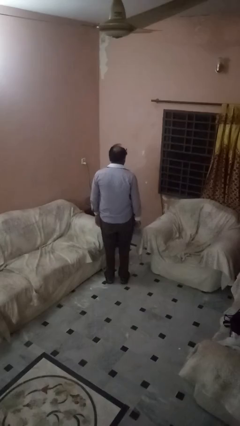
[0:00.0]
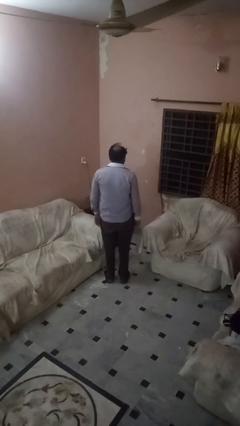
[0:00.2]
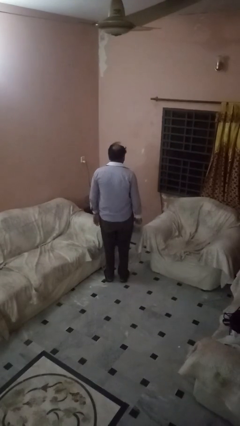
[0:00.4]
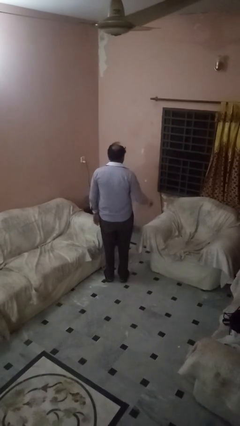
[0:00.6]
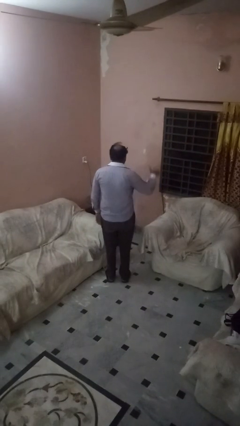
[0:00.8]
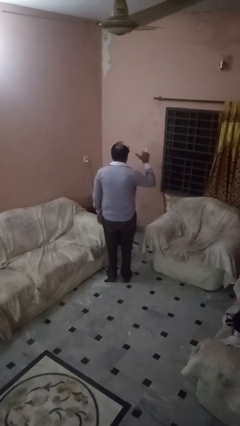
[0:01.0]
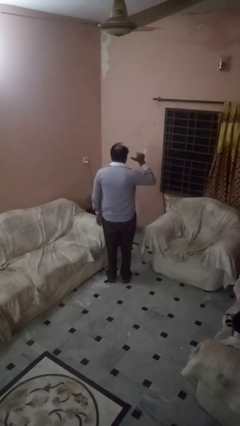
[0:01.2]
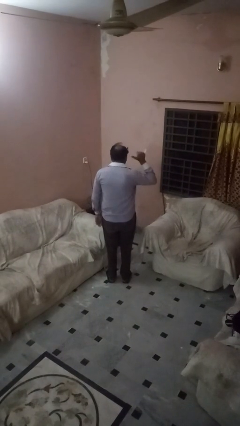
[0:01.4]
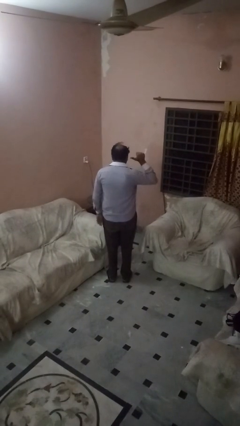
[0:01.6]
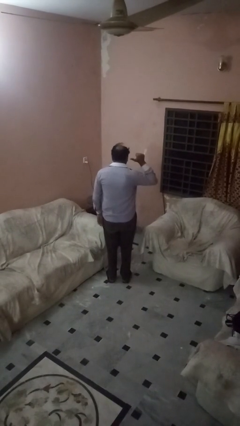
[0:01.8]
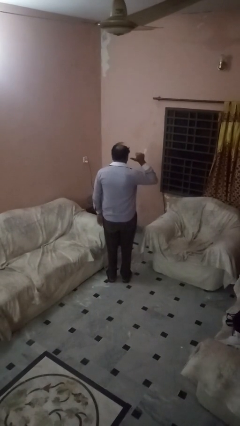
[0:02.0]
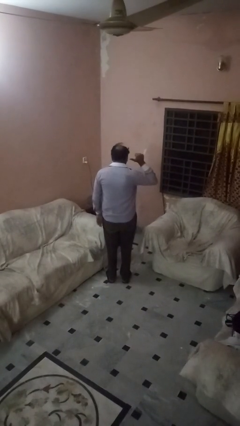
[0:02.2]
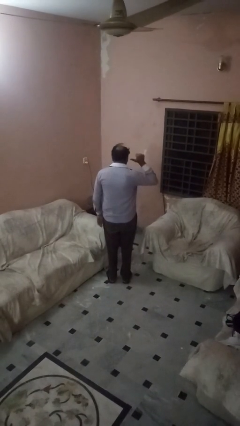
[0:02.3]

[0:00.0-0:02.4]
person gestures behind me

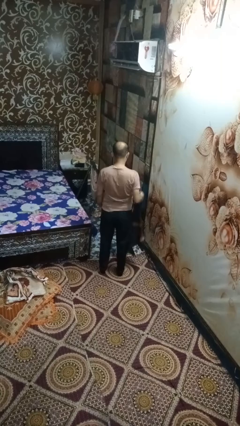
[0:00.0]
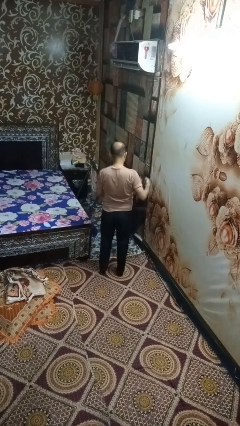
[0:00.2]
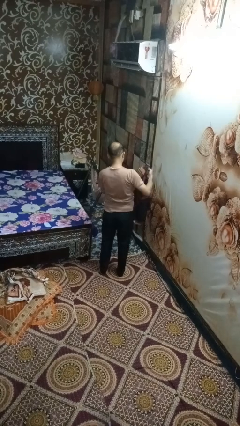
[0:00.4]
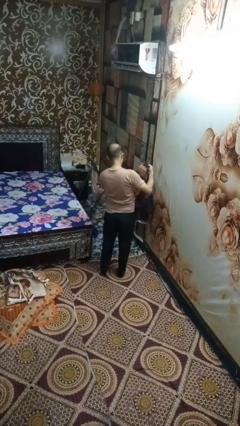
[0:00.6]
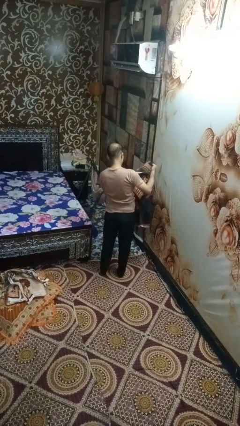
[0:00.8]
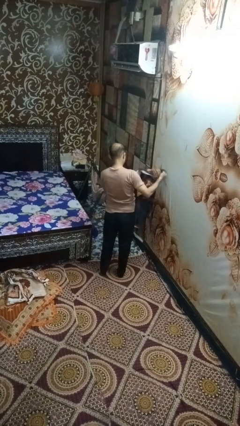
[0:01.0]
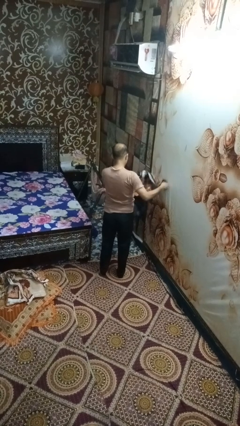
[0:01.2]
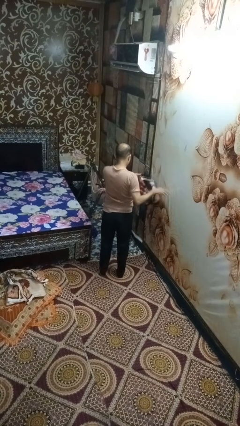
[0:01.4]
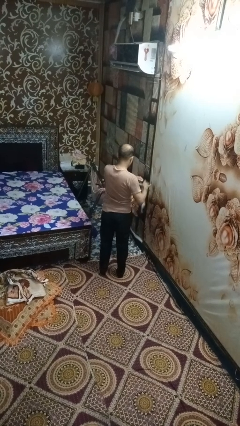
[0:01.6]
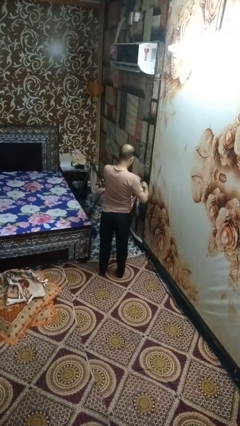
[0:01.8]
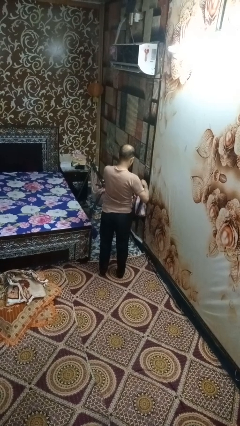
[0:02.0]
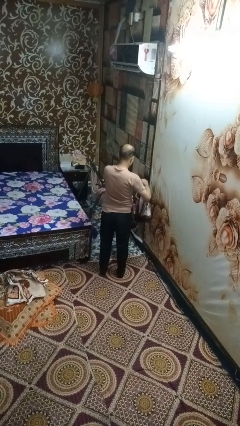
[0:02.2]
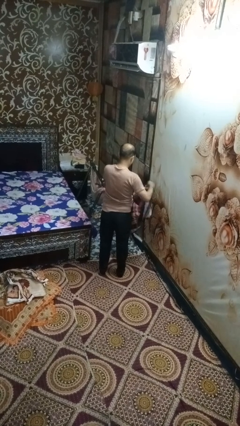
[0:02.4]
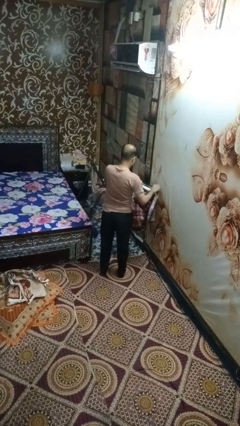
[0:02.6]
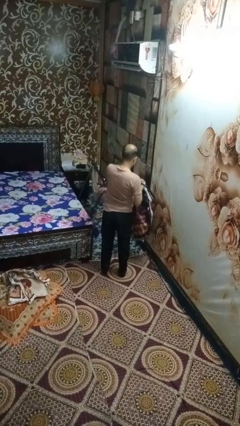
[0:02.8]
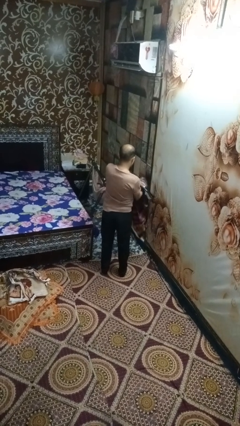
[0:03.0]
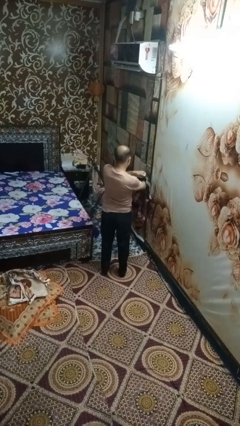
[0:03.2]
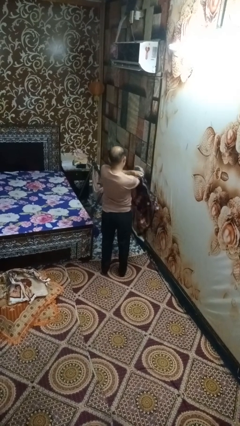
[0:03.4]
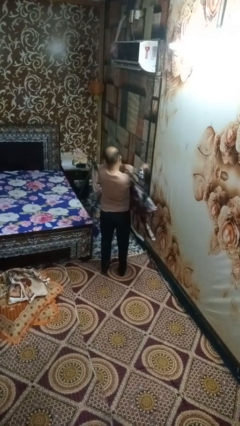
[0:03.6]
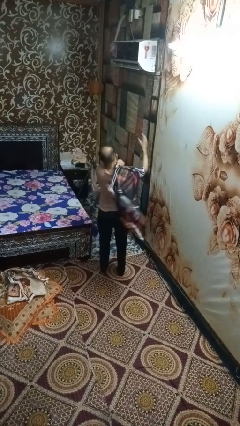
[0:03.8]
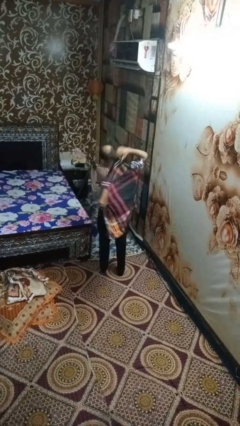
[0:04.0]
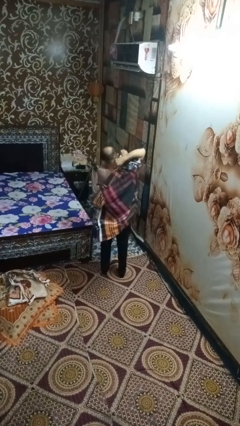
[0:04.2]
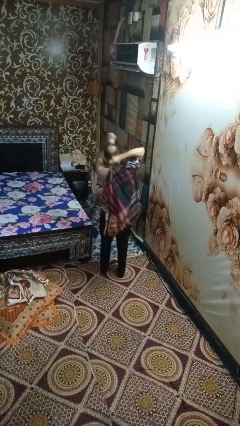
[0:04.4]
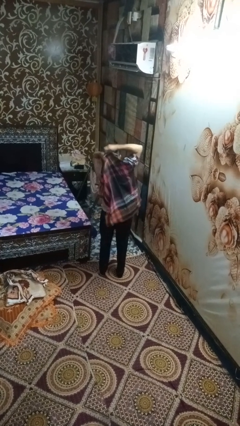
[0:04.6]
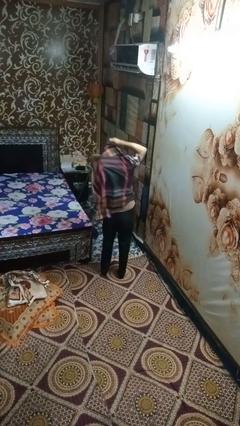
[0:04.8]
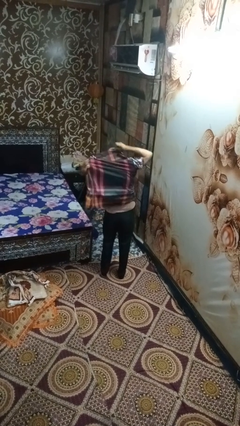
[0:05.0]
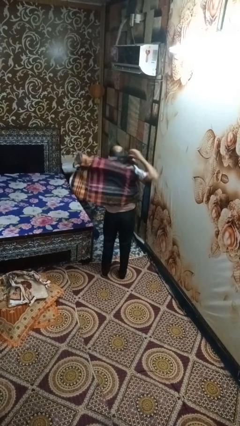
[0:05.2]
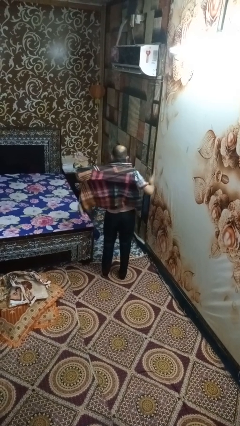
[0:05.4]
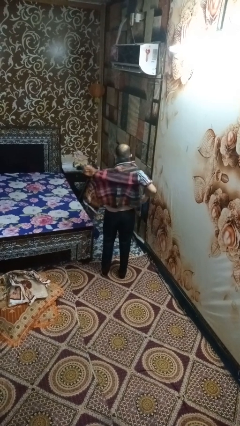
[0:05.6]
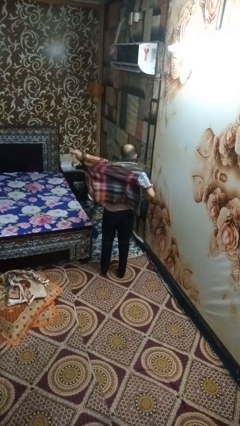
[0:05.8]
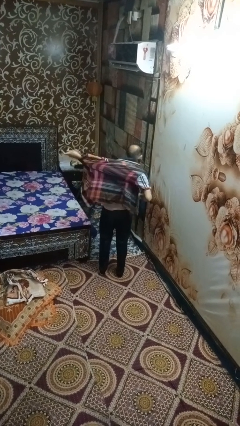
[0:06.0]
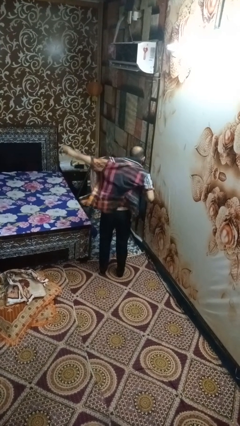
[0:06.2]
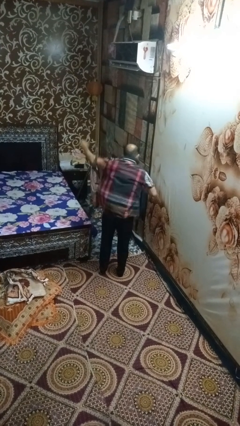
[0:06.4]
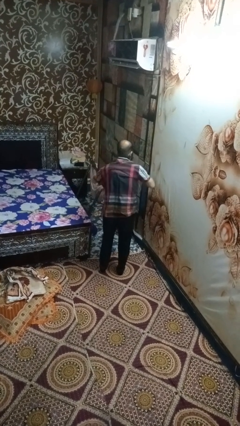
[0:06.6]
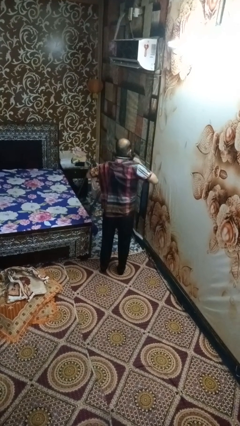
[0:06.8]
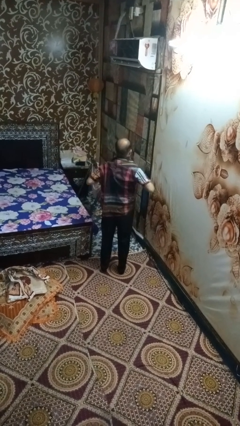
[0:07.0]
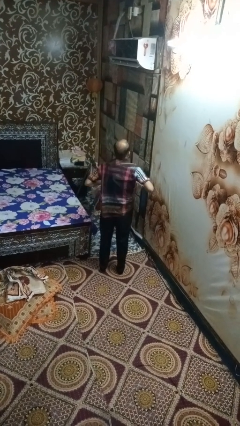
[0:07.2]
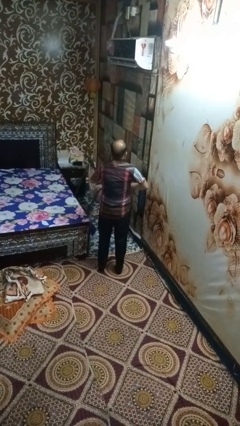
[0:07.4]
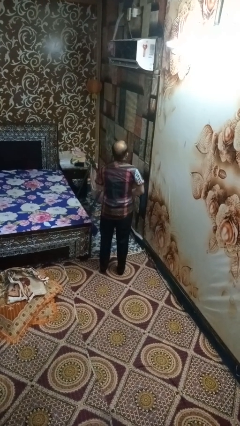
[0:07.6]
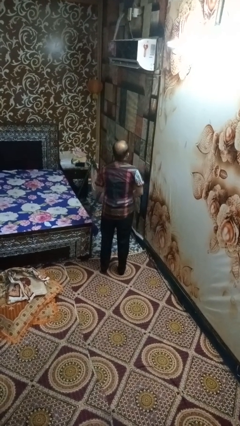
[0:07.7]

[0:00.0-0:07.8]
person puts on shirt

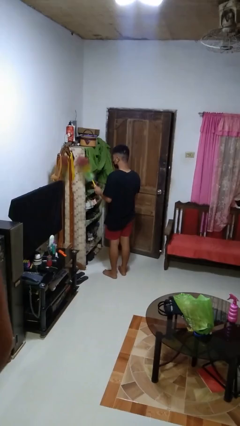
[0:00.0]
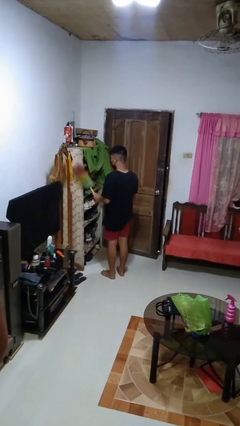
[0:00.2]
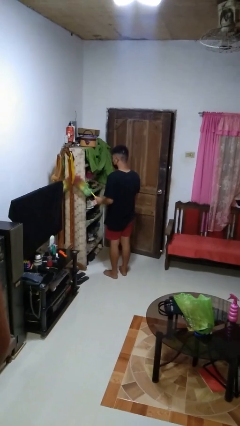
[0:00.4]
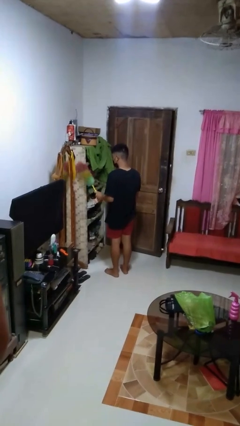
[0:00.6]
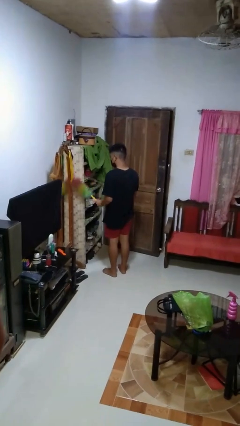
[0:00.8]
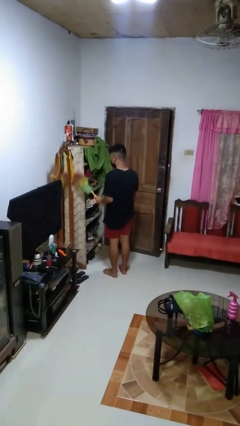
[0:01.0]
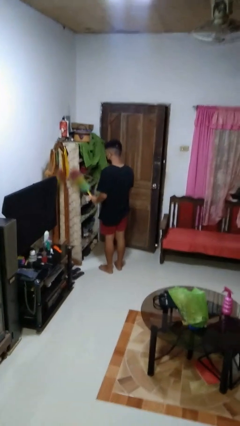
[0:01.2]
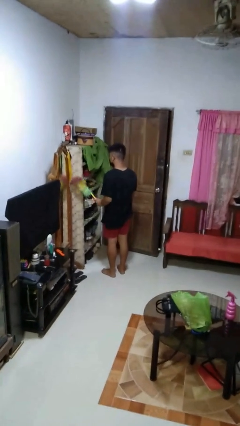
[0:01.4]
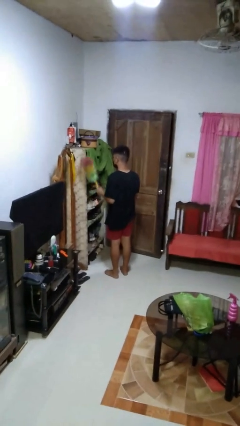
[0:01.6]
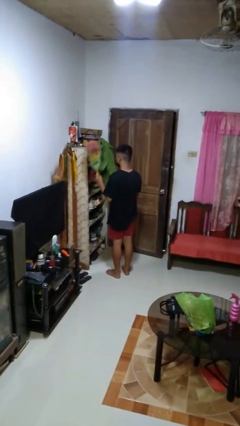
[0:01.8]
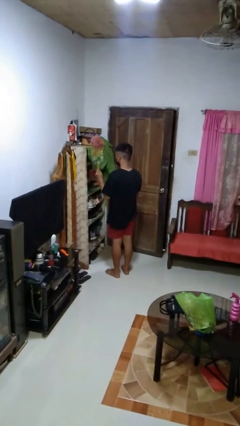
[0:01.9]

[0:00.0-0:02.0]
person dusts furniture

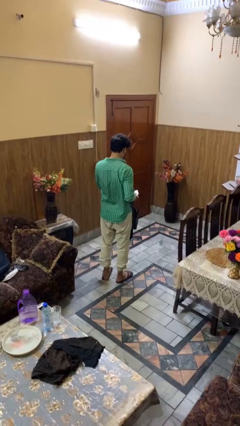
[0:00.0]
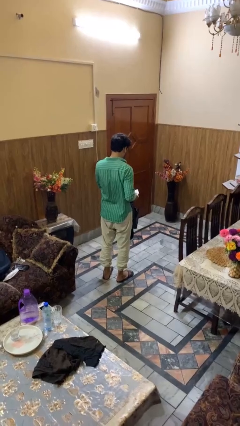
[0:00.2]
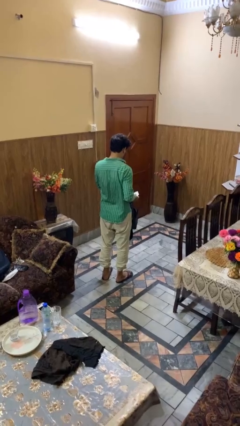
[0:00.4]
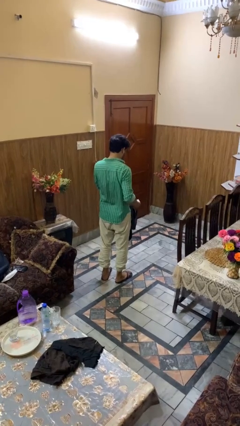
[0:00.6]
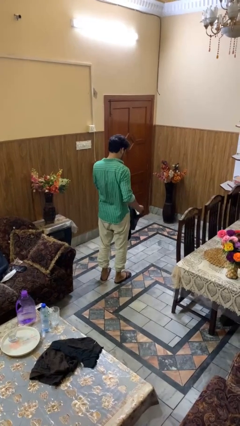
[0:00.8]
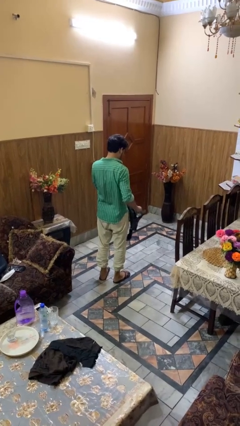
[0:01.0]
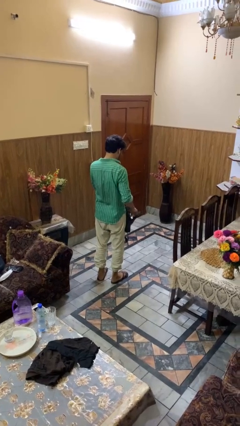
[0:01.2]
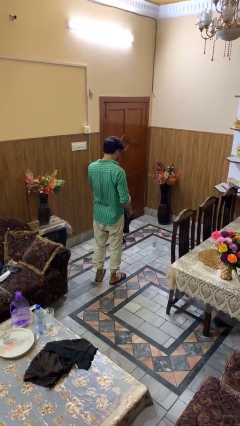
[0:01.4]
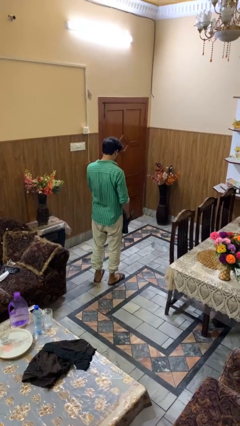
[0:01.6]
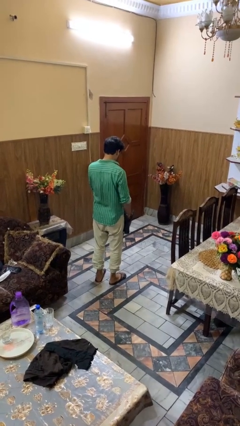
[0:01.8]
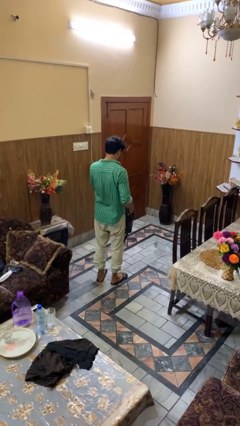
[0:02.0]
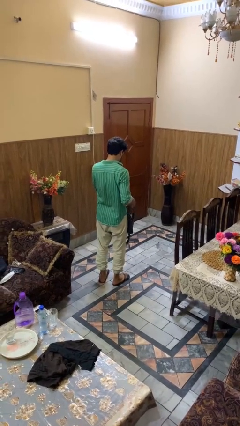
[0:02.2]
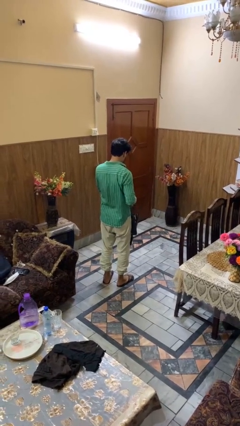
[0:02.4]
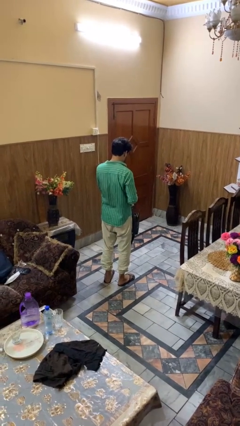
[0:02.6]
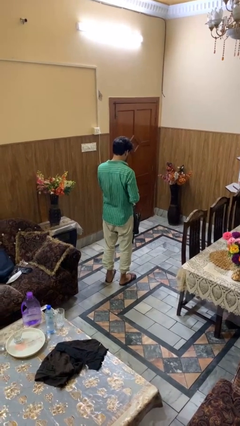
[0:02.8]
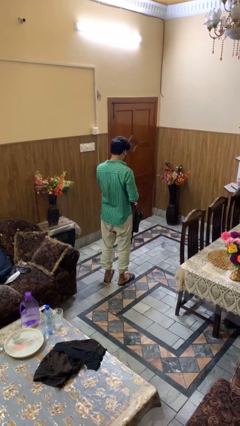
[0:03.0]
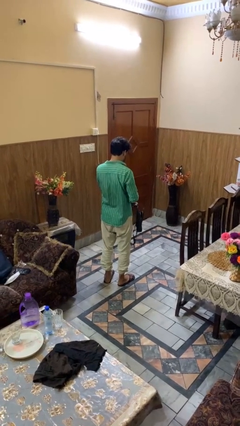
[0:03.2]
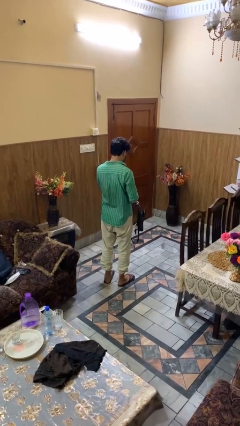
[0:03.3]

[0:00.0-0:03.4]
person puts object into purse

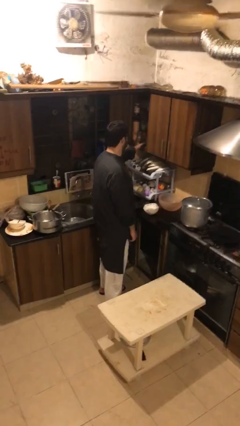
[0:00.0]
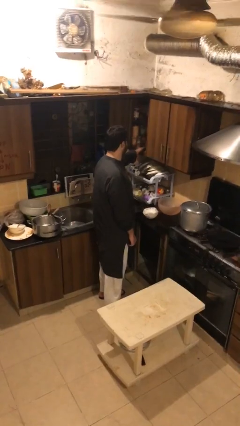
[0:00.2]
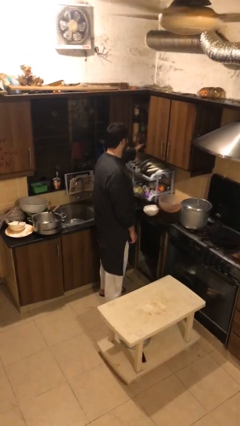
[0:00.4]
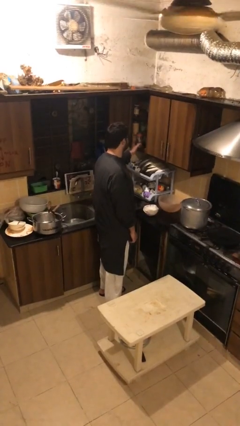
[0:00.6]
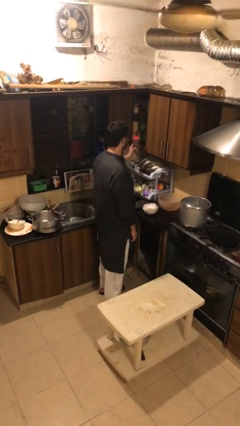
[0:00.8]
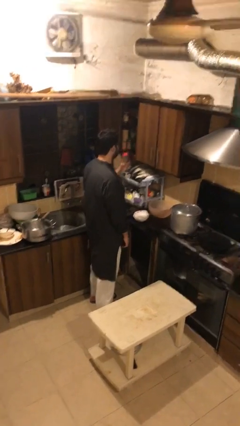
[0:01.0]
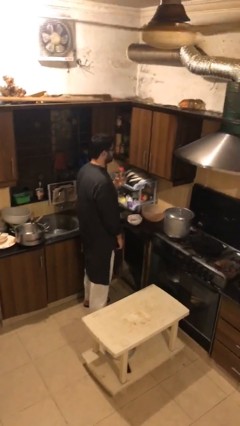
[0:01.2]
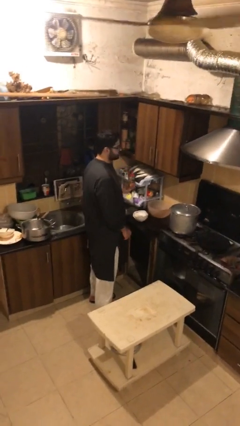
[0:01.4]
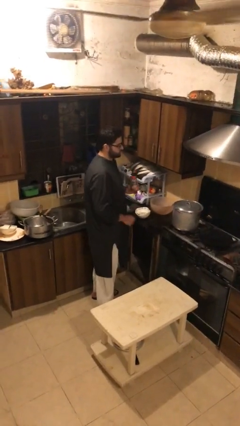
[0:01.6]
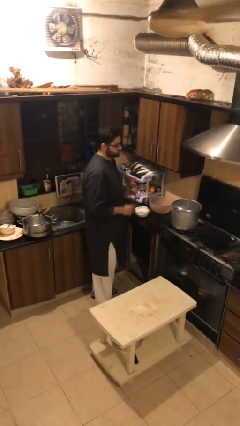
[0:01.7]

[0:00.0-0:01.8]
person picks up object from table

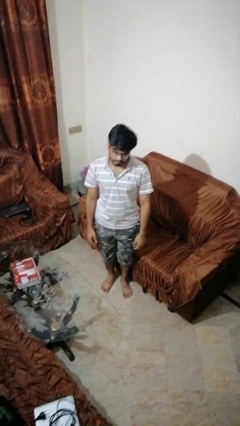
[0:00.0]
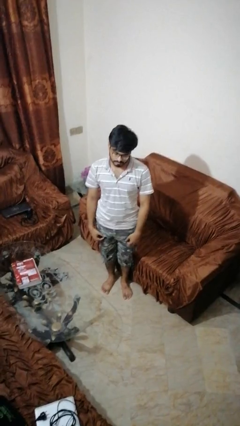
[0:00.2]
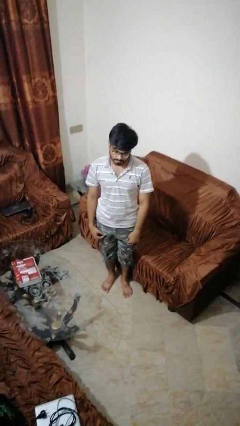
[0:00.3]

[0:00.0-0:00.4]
person stands up
